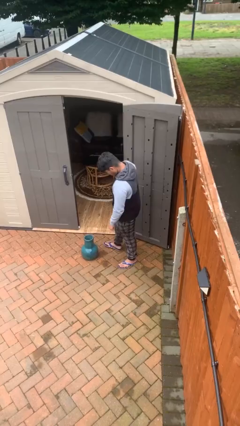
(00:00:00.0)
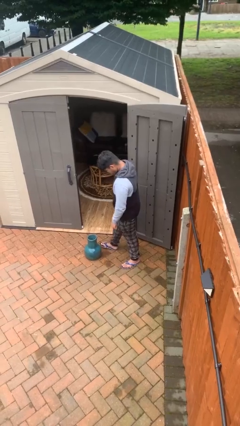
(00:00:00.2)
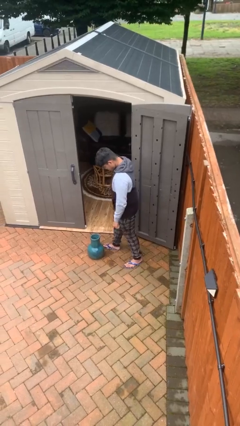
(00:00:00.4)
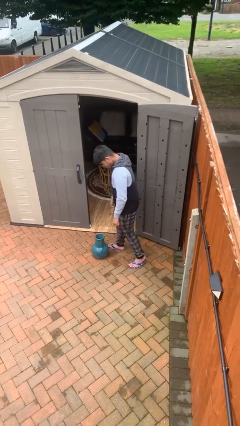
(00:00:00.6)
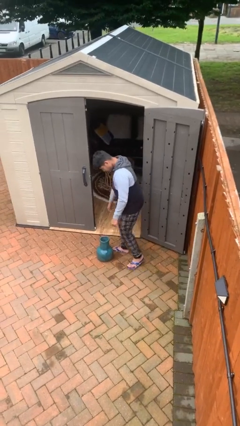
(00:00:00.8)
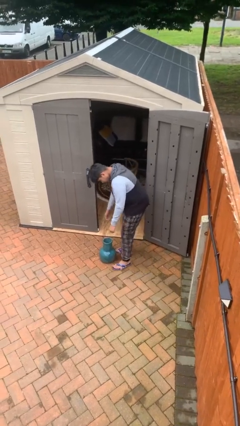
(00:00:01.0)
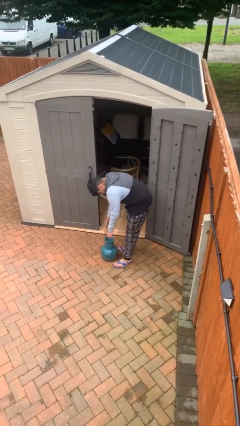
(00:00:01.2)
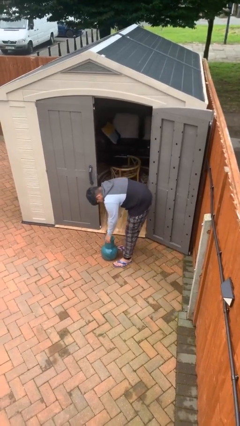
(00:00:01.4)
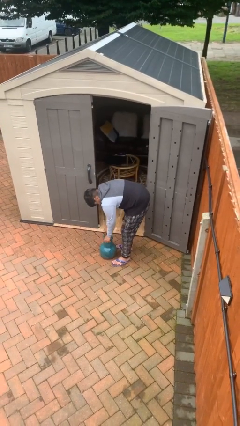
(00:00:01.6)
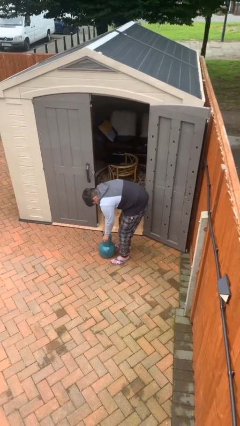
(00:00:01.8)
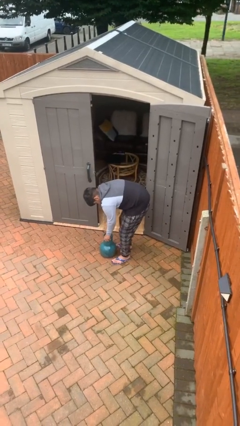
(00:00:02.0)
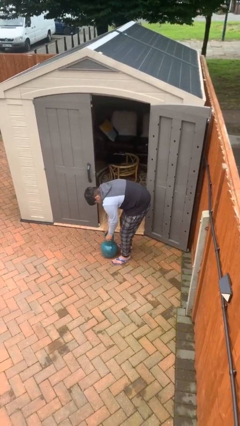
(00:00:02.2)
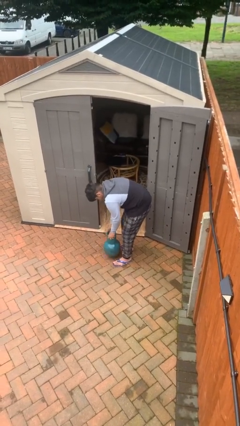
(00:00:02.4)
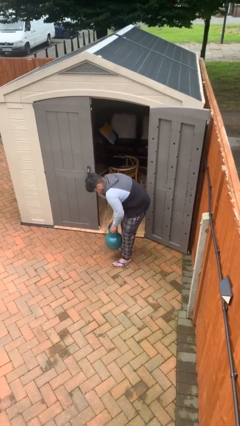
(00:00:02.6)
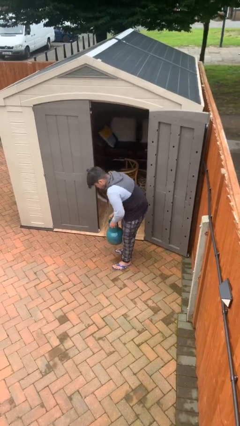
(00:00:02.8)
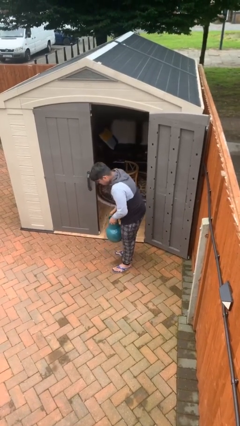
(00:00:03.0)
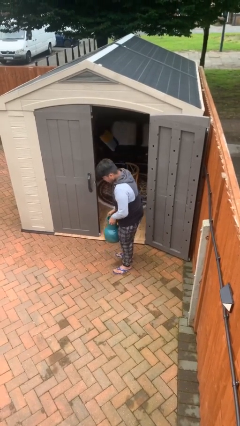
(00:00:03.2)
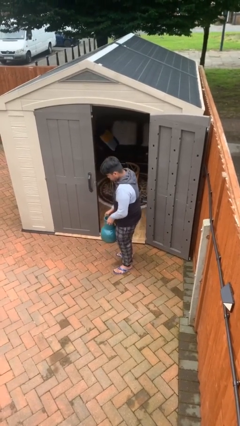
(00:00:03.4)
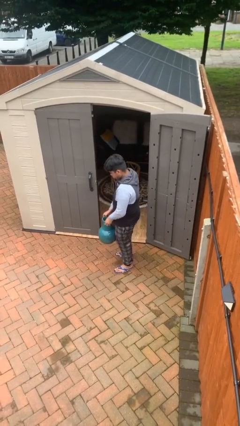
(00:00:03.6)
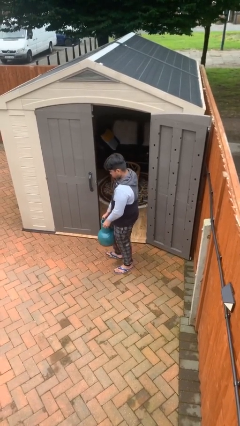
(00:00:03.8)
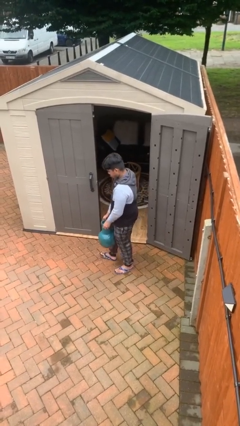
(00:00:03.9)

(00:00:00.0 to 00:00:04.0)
person picks up object from floor

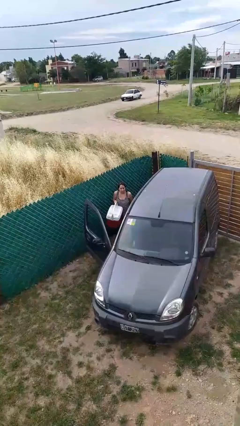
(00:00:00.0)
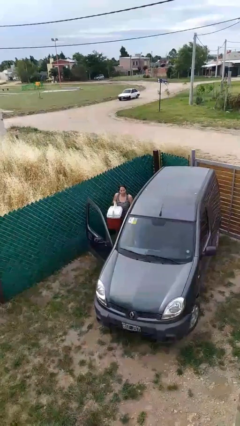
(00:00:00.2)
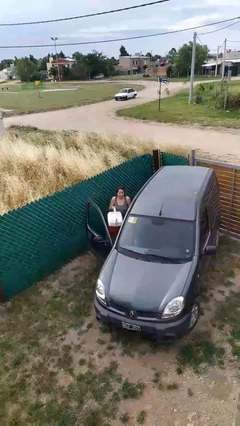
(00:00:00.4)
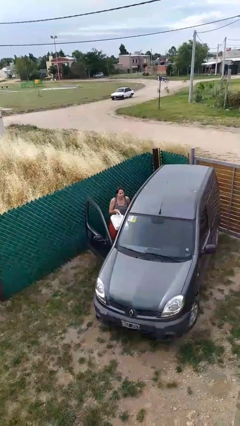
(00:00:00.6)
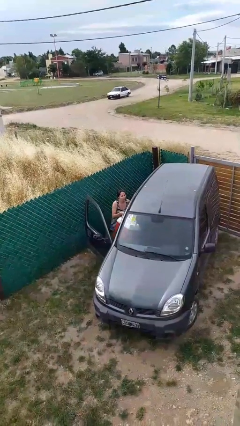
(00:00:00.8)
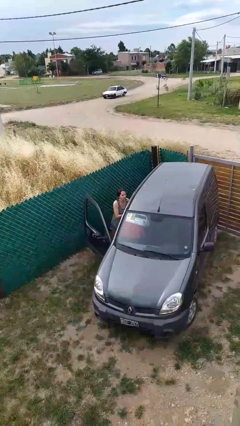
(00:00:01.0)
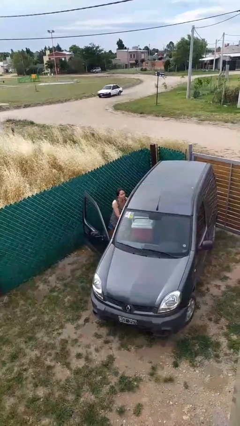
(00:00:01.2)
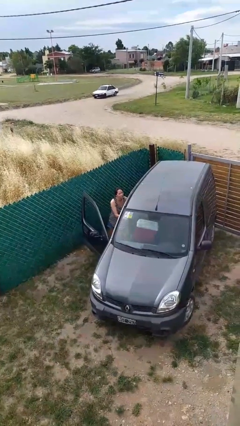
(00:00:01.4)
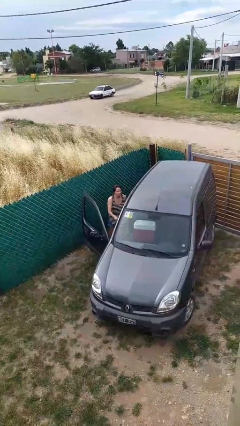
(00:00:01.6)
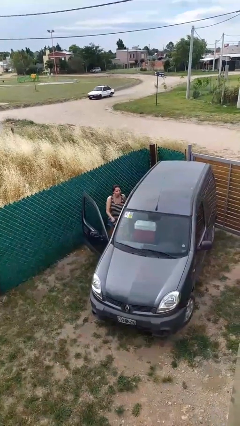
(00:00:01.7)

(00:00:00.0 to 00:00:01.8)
person loads car

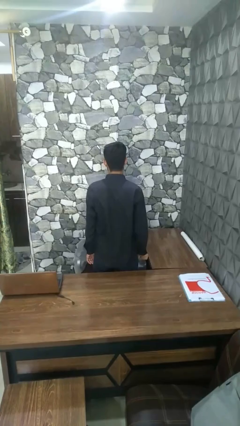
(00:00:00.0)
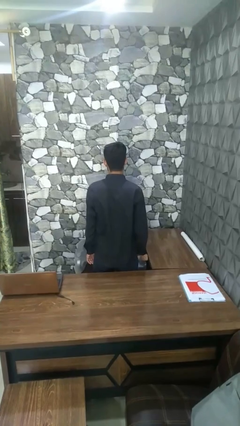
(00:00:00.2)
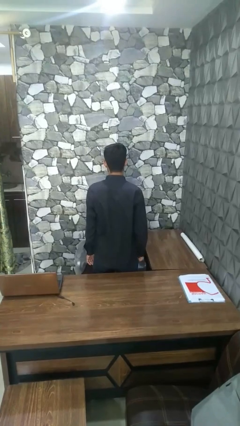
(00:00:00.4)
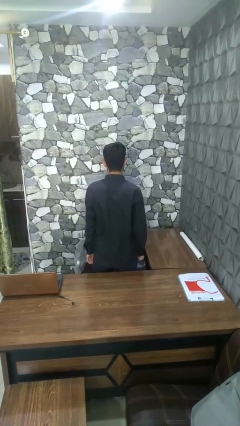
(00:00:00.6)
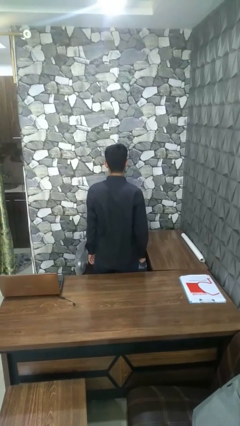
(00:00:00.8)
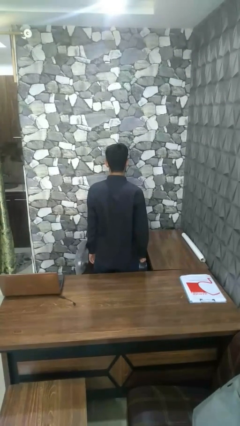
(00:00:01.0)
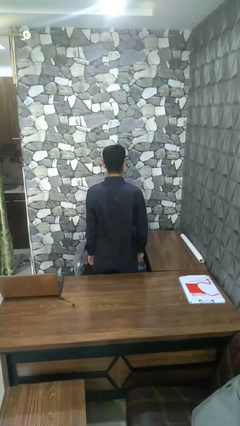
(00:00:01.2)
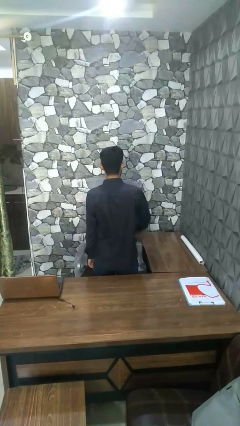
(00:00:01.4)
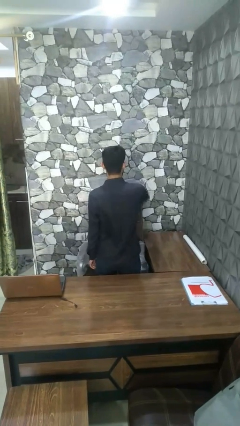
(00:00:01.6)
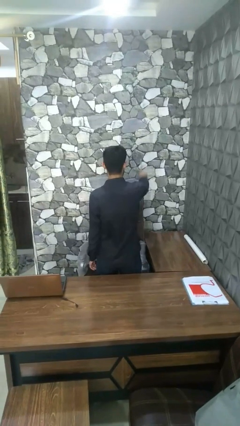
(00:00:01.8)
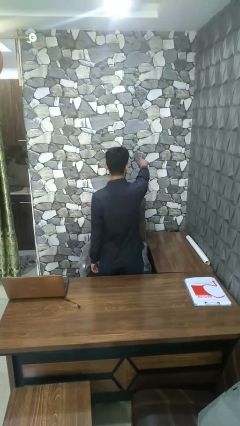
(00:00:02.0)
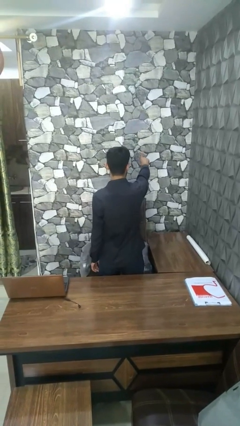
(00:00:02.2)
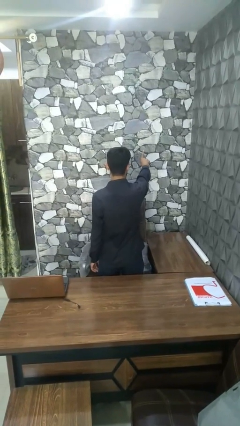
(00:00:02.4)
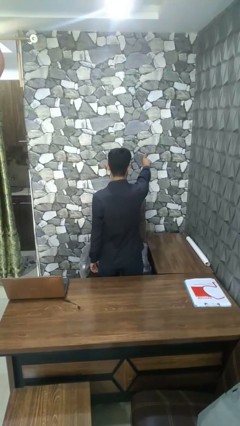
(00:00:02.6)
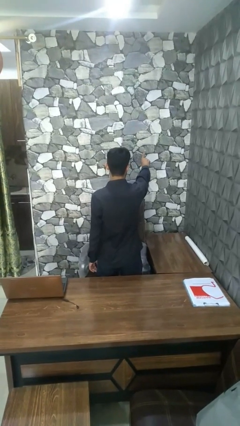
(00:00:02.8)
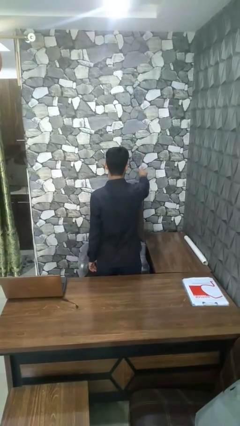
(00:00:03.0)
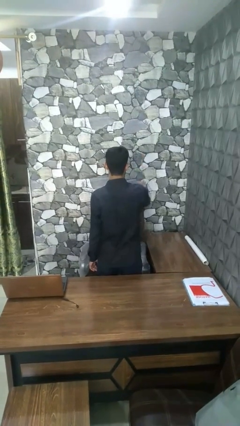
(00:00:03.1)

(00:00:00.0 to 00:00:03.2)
person gestures number one

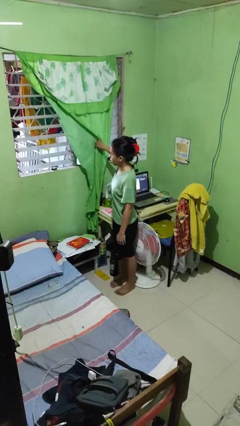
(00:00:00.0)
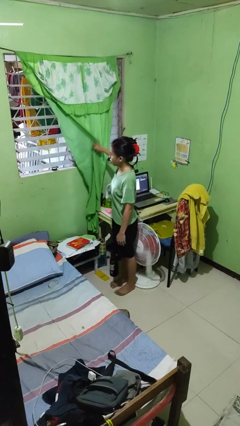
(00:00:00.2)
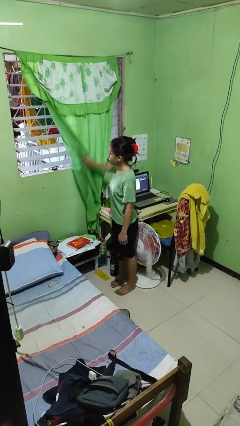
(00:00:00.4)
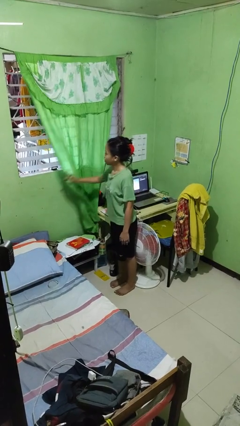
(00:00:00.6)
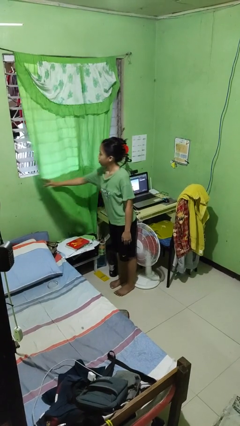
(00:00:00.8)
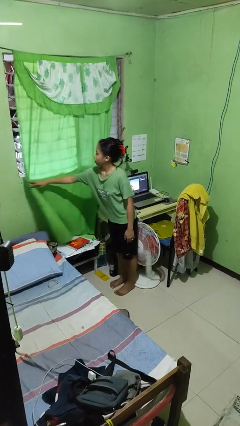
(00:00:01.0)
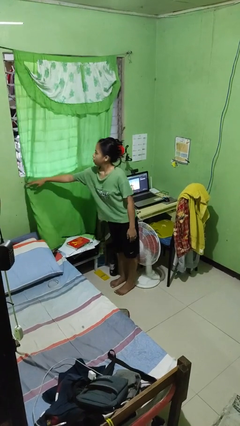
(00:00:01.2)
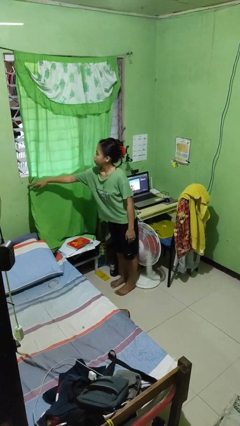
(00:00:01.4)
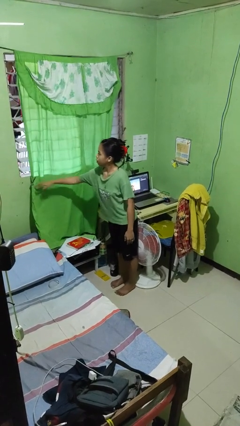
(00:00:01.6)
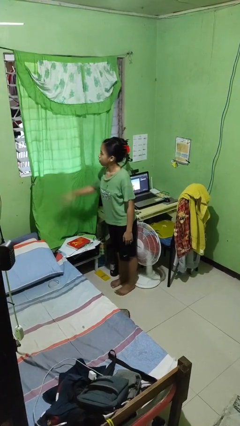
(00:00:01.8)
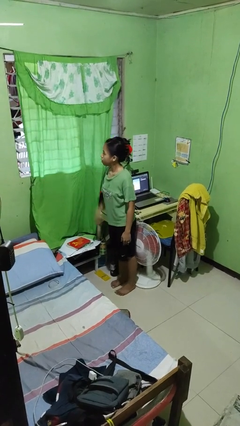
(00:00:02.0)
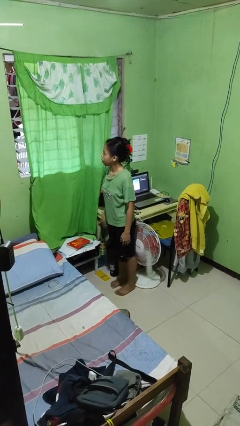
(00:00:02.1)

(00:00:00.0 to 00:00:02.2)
person closes curtains

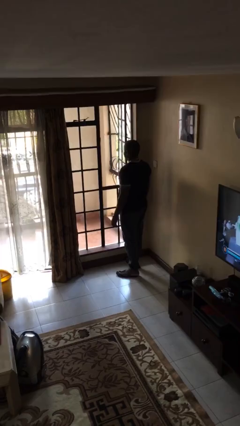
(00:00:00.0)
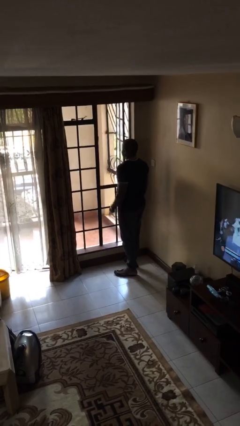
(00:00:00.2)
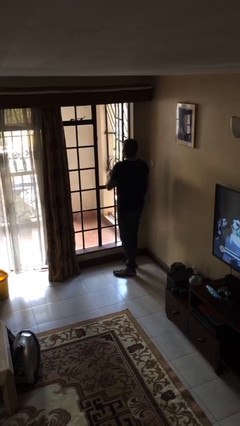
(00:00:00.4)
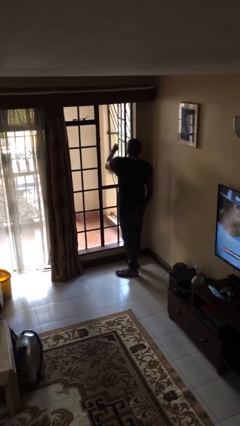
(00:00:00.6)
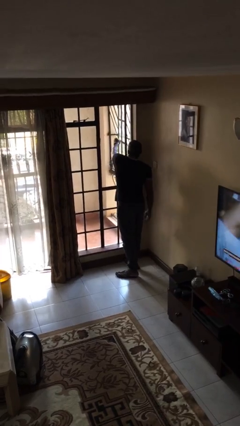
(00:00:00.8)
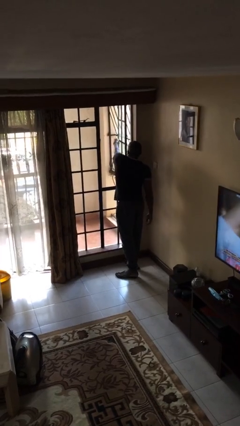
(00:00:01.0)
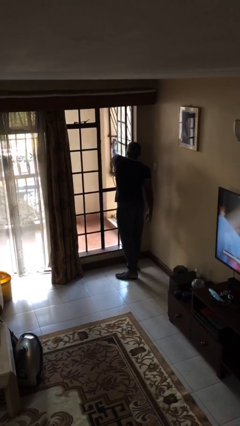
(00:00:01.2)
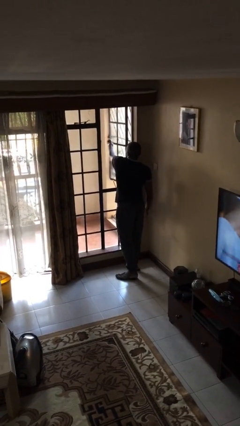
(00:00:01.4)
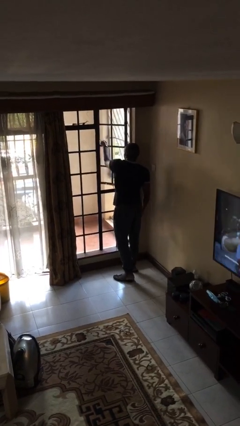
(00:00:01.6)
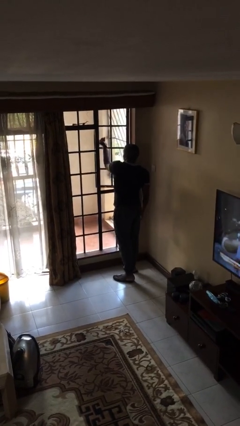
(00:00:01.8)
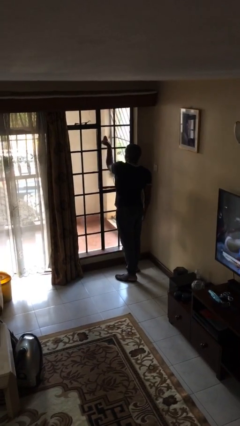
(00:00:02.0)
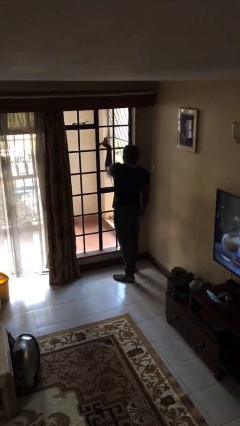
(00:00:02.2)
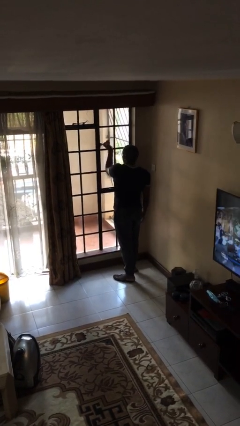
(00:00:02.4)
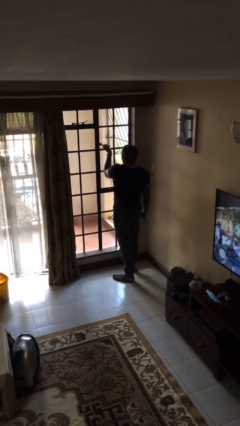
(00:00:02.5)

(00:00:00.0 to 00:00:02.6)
person closes home window

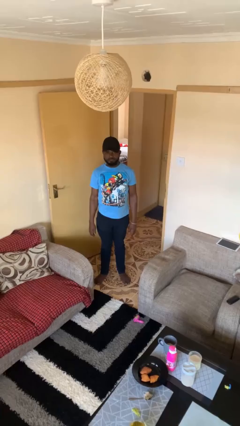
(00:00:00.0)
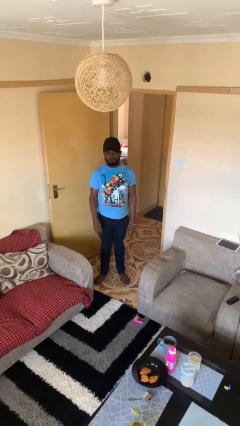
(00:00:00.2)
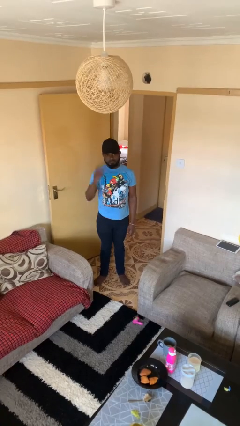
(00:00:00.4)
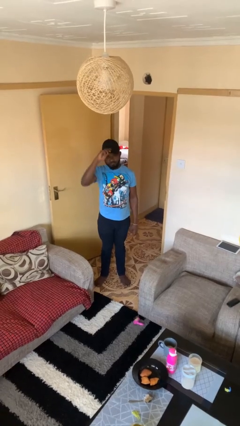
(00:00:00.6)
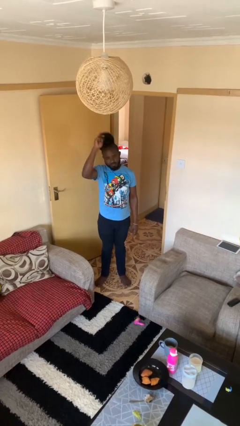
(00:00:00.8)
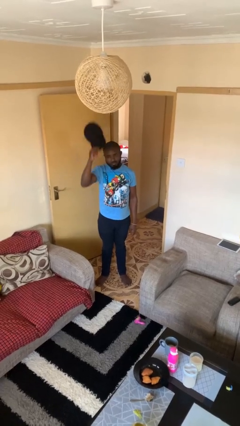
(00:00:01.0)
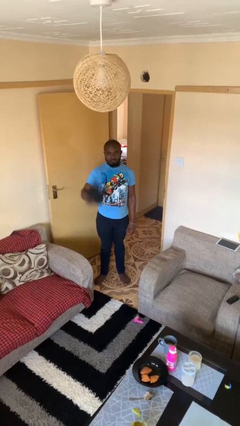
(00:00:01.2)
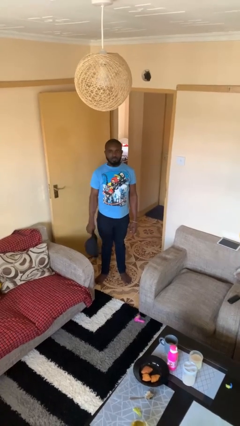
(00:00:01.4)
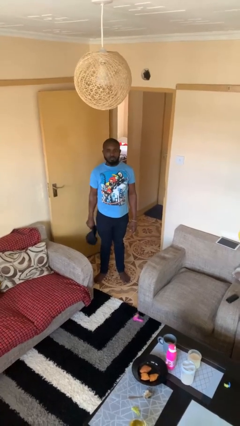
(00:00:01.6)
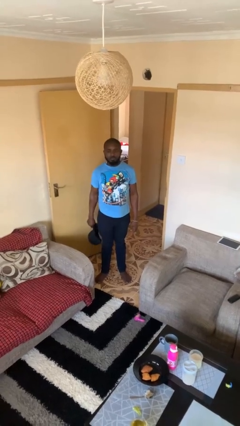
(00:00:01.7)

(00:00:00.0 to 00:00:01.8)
person takes off hat

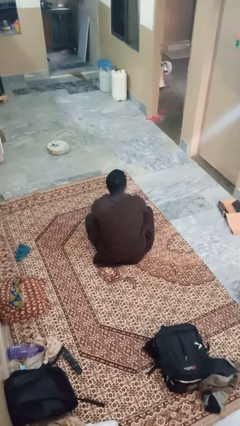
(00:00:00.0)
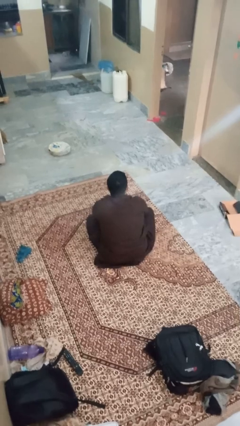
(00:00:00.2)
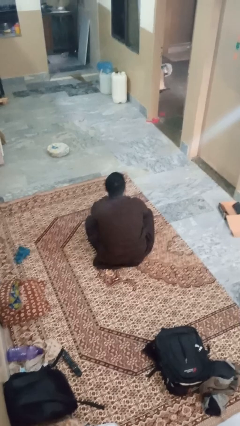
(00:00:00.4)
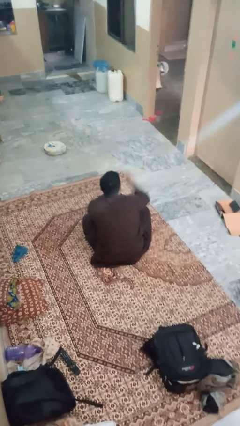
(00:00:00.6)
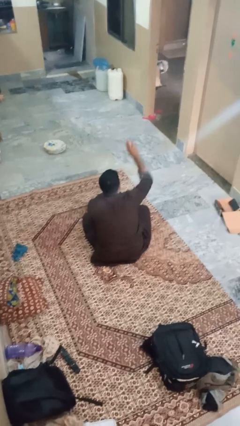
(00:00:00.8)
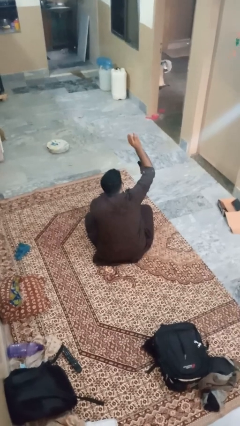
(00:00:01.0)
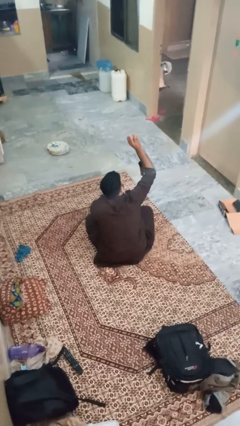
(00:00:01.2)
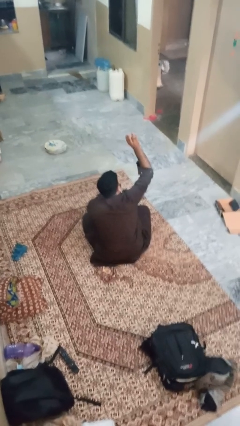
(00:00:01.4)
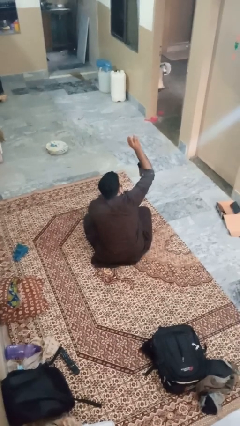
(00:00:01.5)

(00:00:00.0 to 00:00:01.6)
person gestures number three
